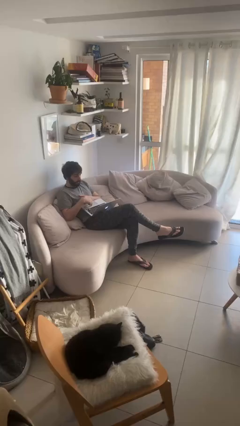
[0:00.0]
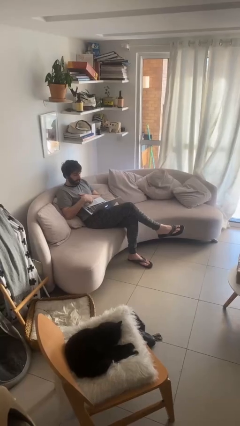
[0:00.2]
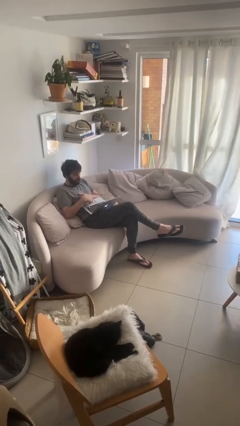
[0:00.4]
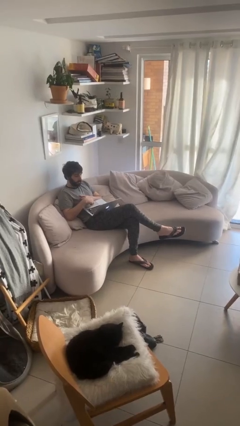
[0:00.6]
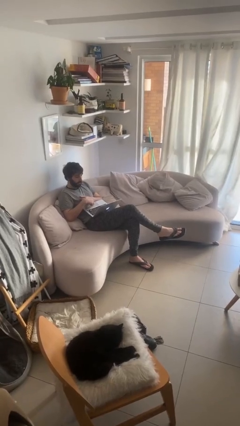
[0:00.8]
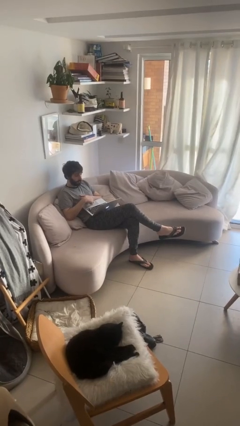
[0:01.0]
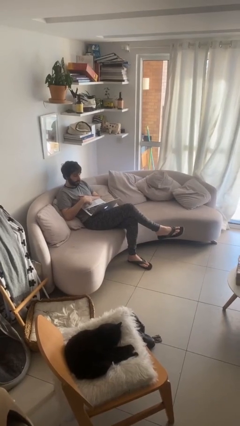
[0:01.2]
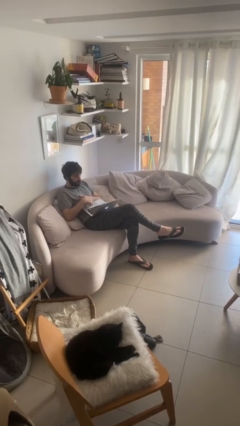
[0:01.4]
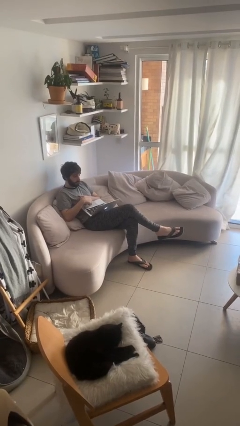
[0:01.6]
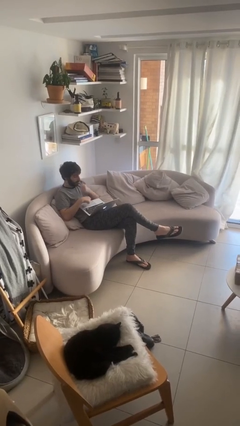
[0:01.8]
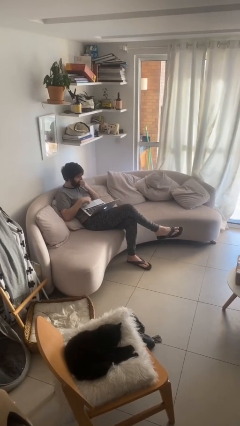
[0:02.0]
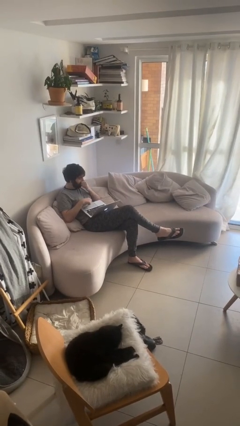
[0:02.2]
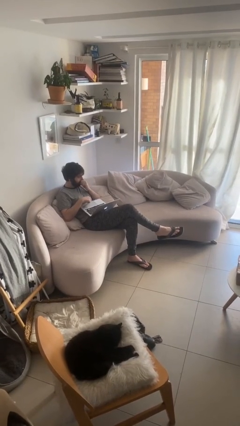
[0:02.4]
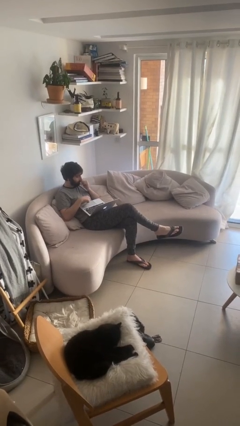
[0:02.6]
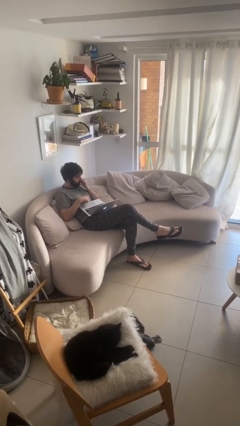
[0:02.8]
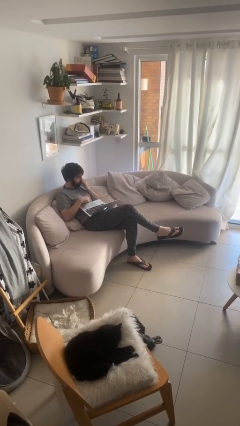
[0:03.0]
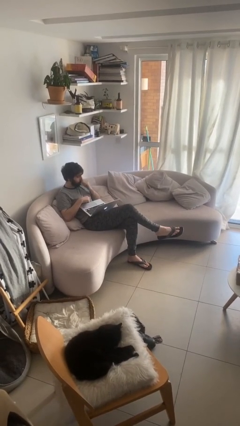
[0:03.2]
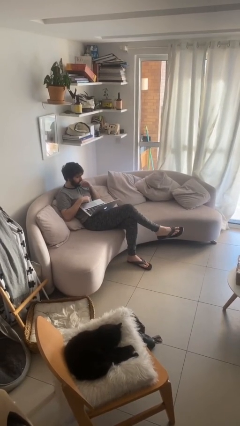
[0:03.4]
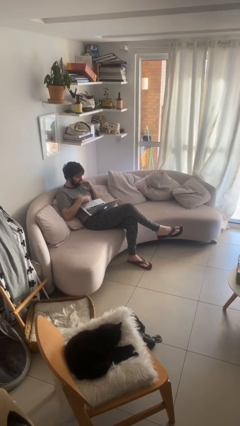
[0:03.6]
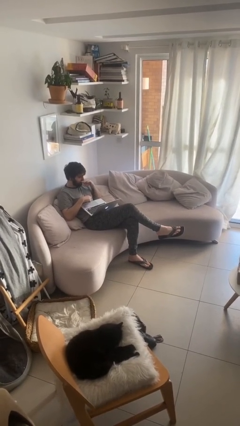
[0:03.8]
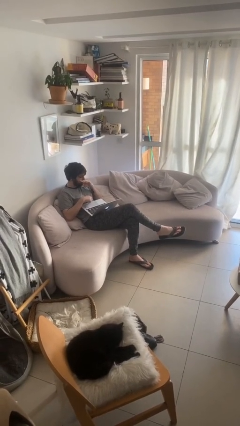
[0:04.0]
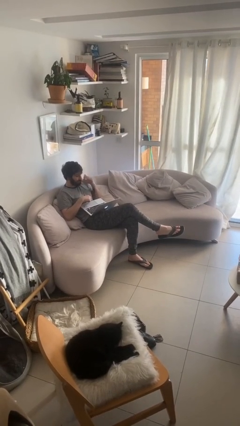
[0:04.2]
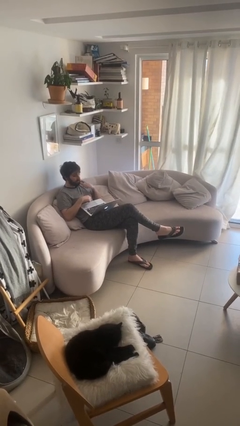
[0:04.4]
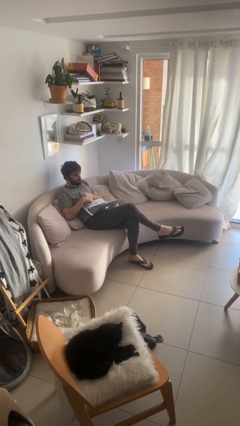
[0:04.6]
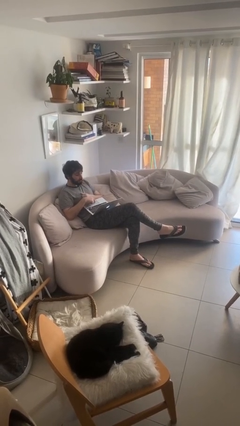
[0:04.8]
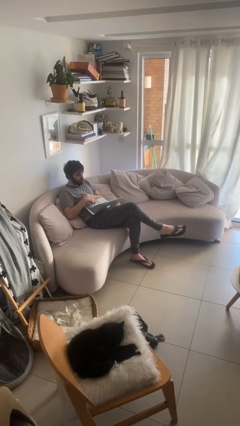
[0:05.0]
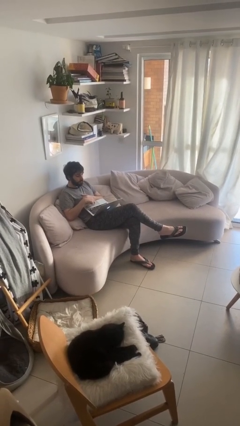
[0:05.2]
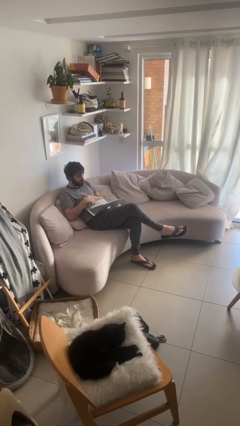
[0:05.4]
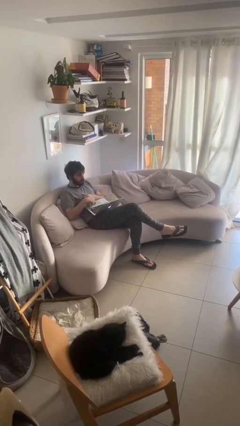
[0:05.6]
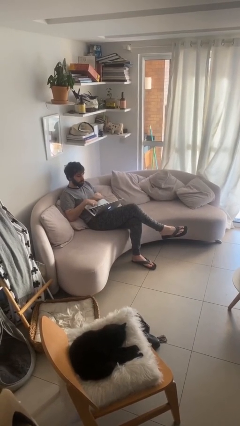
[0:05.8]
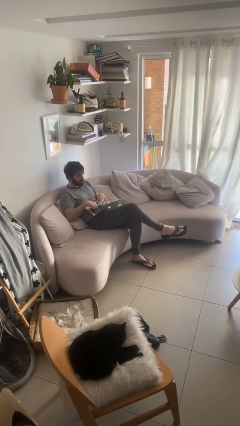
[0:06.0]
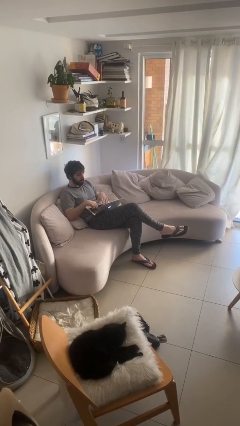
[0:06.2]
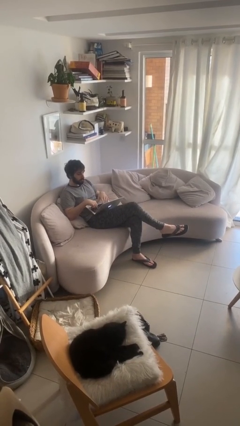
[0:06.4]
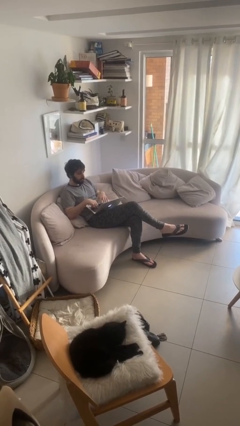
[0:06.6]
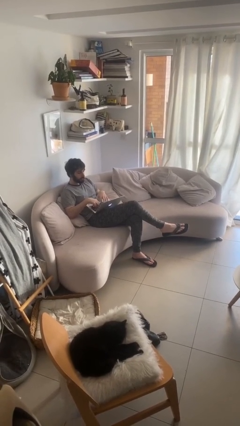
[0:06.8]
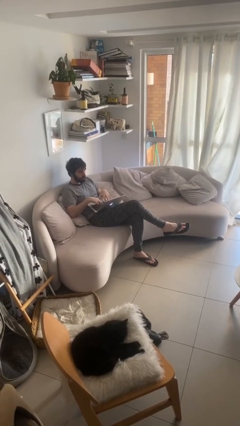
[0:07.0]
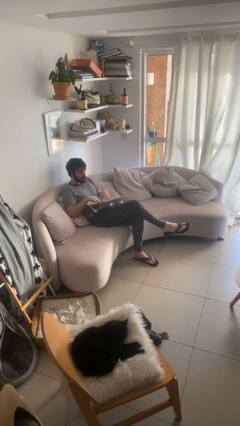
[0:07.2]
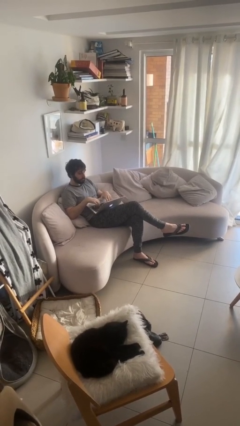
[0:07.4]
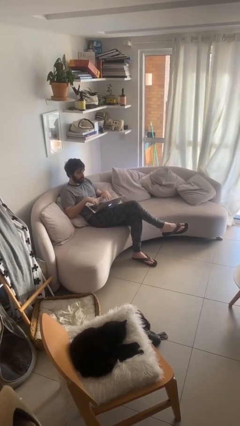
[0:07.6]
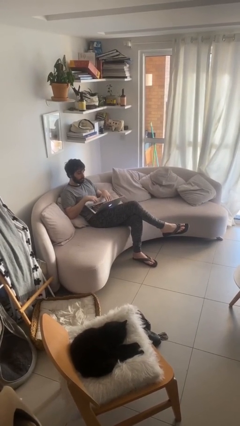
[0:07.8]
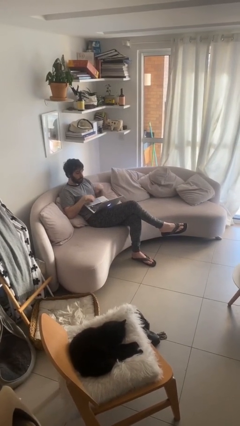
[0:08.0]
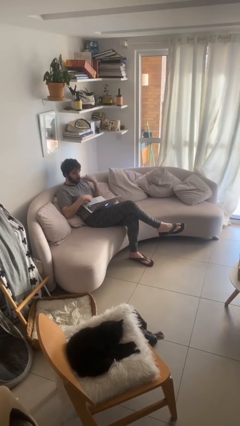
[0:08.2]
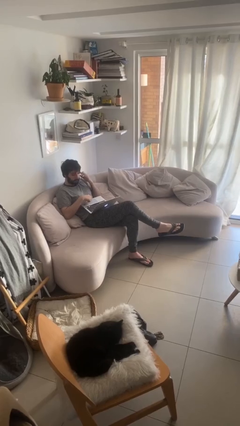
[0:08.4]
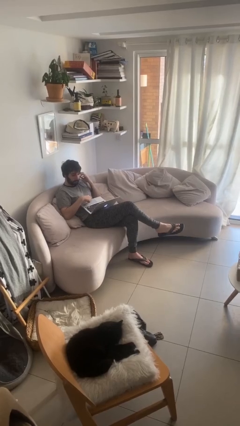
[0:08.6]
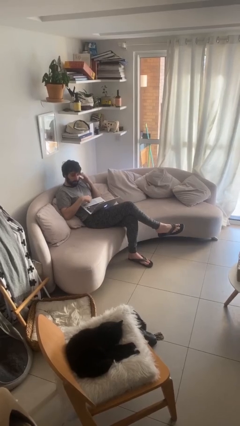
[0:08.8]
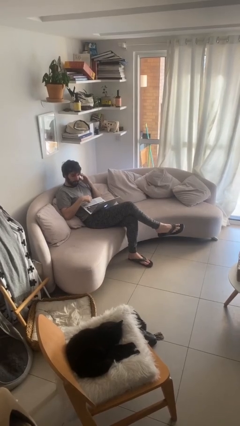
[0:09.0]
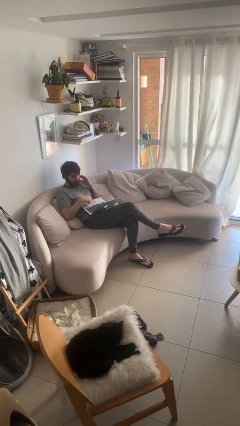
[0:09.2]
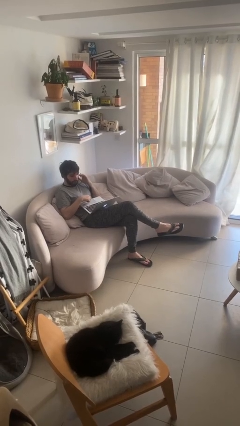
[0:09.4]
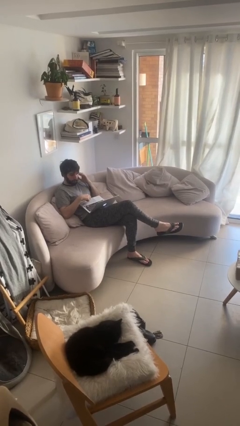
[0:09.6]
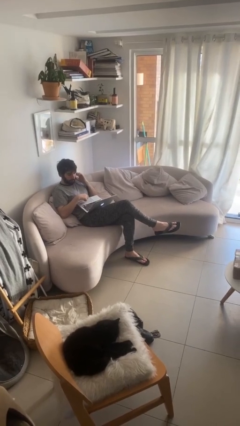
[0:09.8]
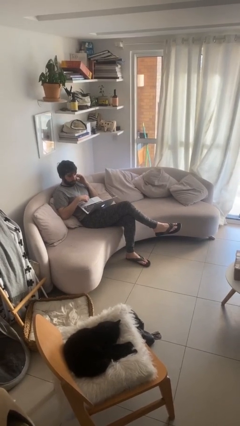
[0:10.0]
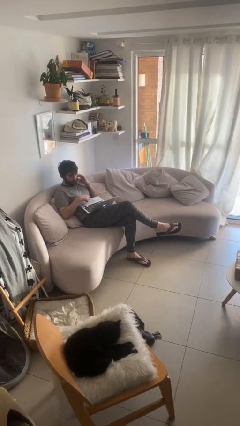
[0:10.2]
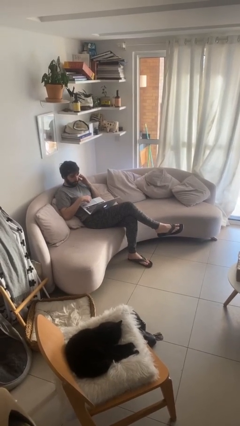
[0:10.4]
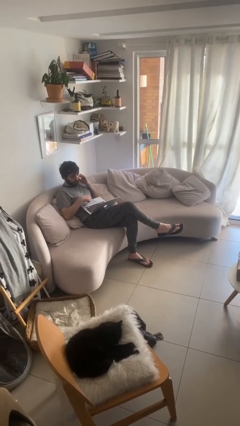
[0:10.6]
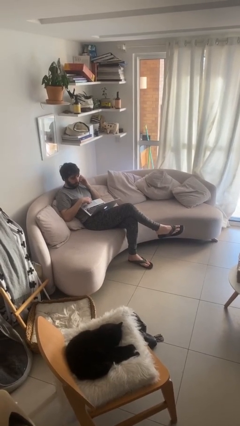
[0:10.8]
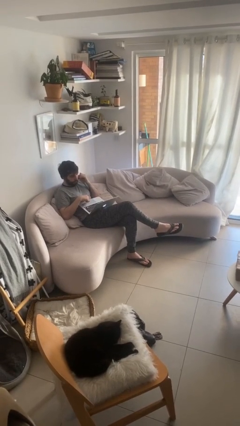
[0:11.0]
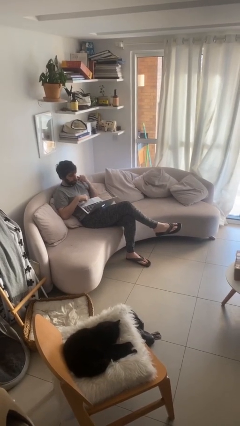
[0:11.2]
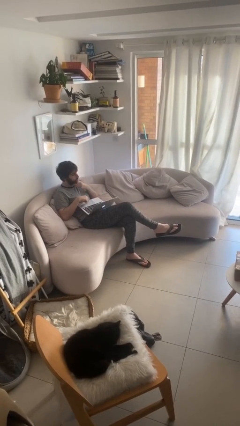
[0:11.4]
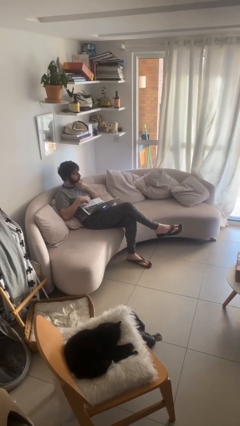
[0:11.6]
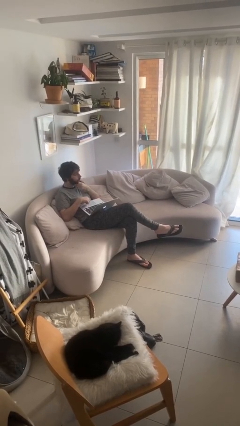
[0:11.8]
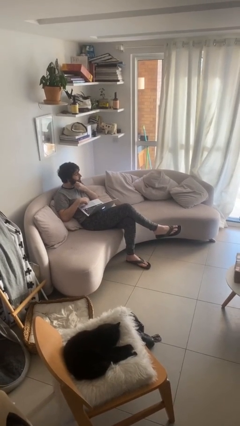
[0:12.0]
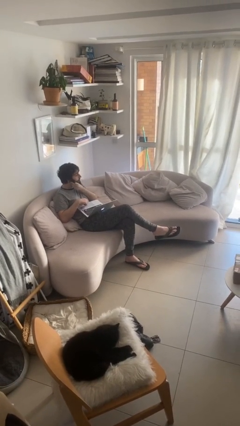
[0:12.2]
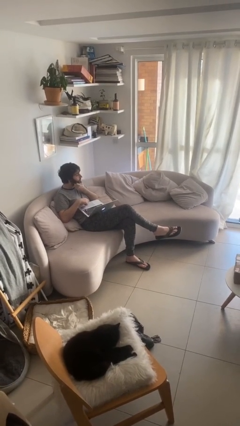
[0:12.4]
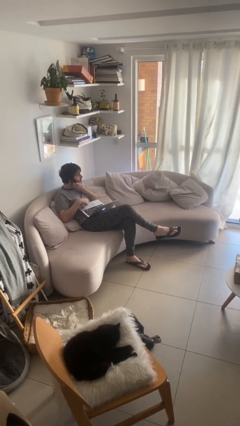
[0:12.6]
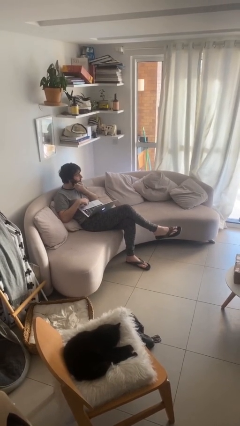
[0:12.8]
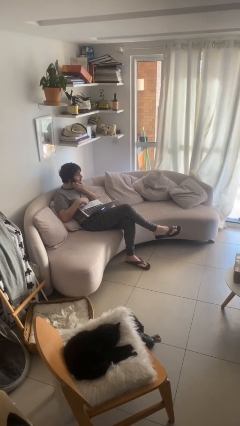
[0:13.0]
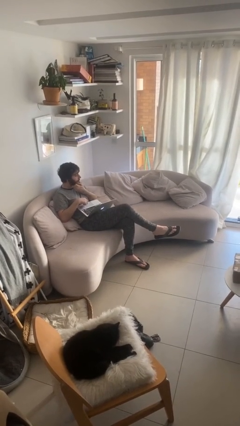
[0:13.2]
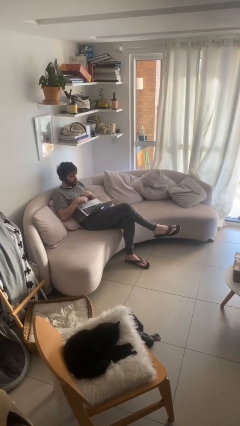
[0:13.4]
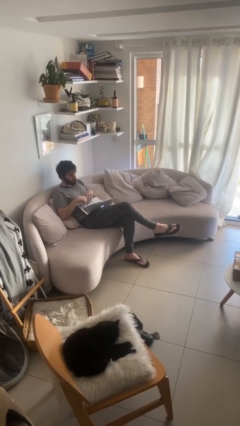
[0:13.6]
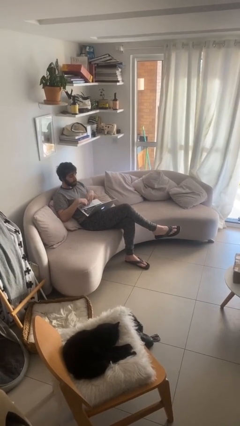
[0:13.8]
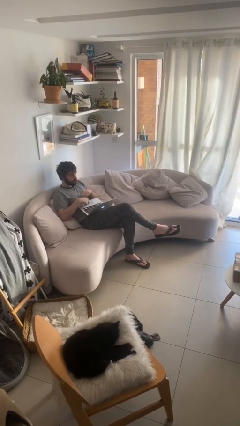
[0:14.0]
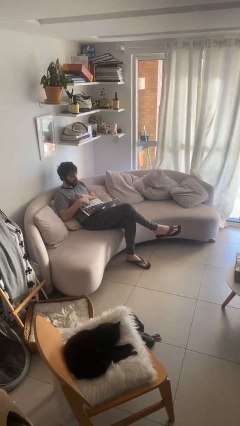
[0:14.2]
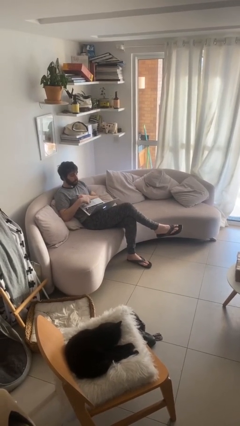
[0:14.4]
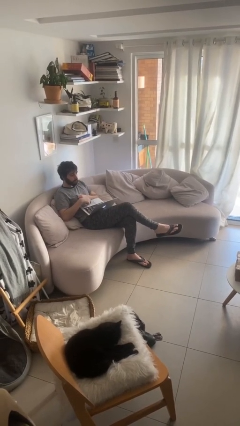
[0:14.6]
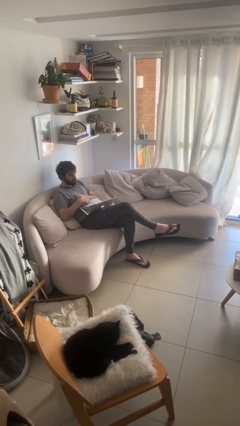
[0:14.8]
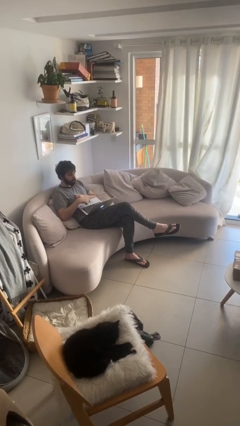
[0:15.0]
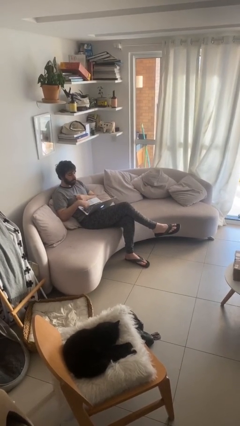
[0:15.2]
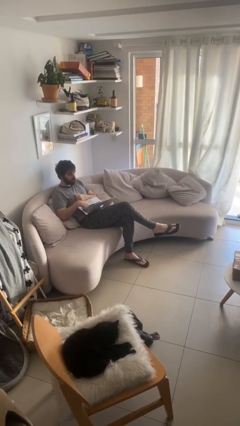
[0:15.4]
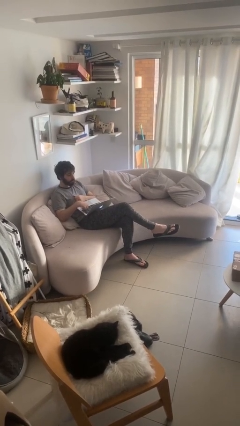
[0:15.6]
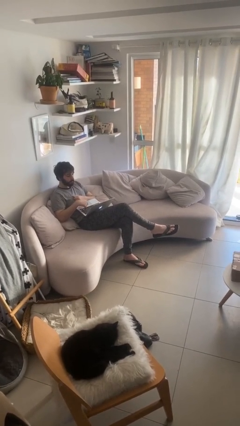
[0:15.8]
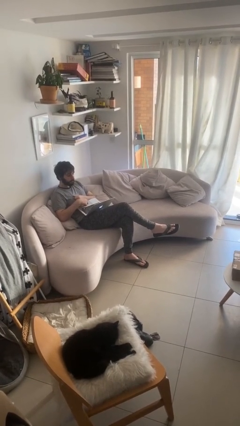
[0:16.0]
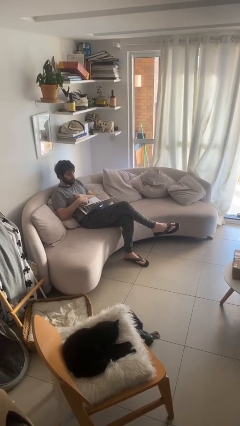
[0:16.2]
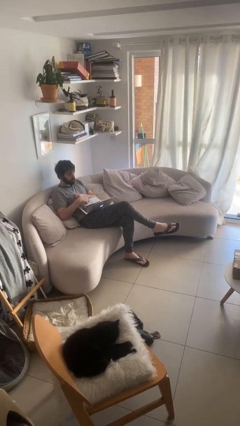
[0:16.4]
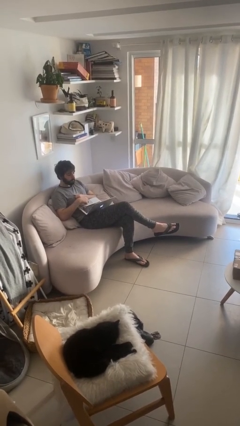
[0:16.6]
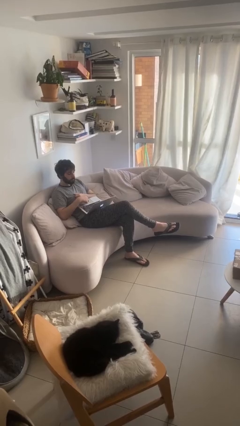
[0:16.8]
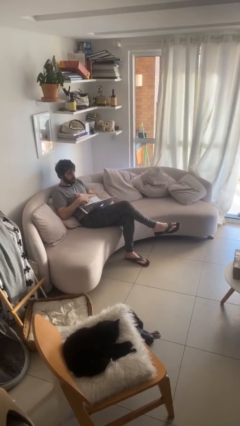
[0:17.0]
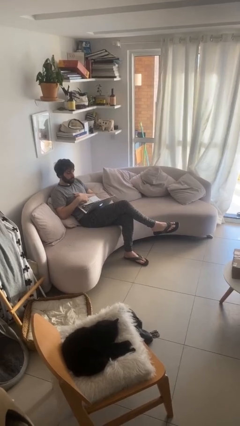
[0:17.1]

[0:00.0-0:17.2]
person interacts with laptop

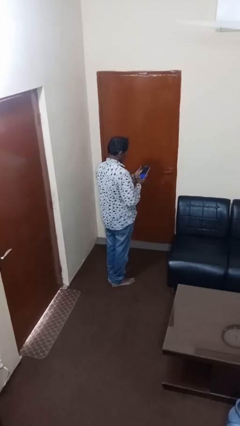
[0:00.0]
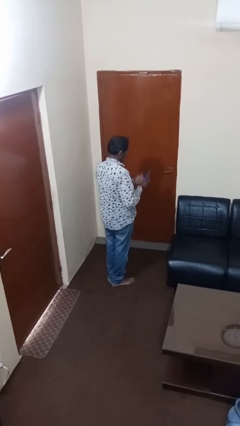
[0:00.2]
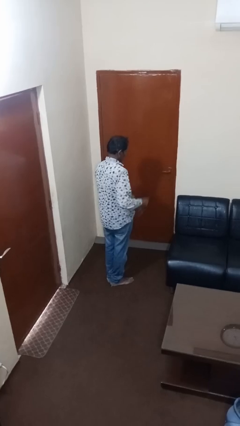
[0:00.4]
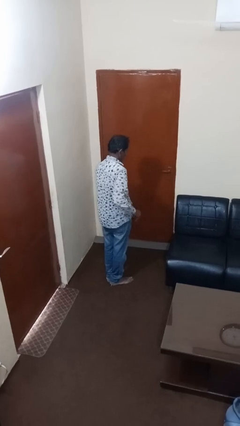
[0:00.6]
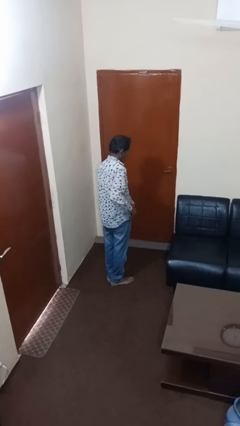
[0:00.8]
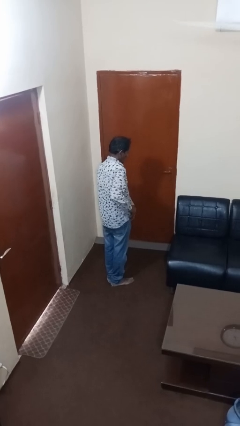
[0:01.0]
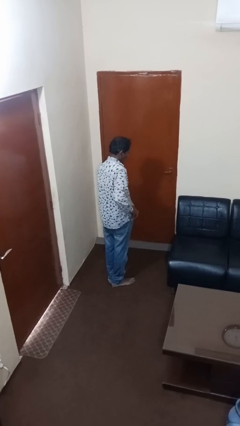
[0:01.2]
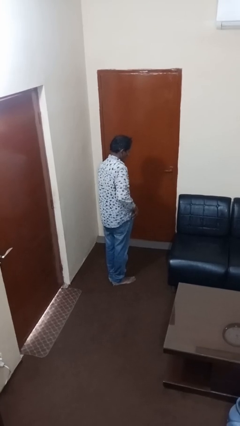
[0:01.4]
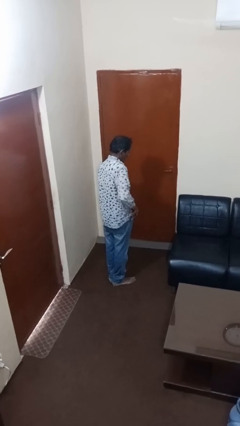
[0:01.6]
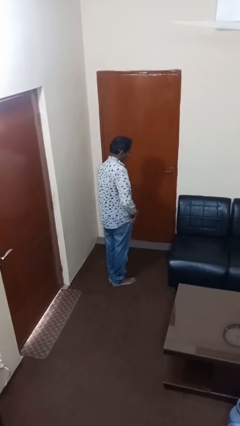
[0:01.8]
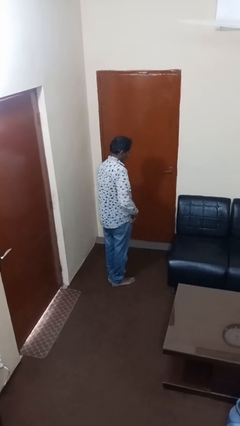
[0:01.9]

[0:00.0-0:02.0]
person puts phone into pocket
